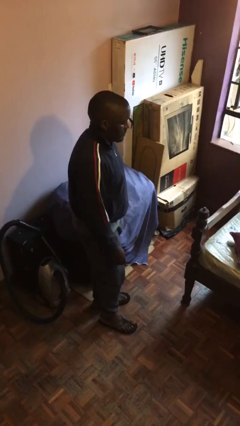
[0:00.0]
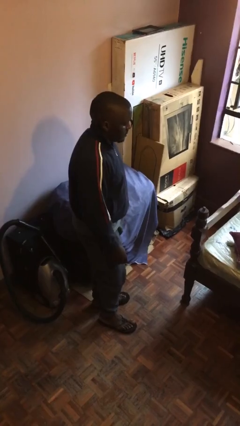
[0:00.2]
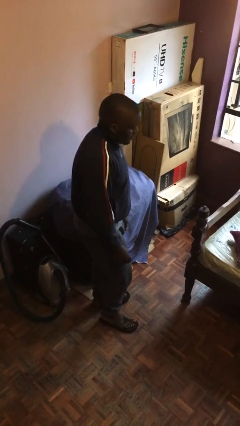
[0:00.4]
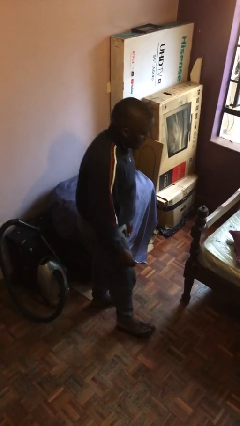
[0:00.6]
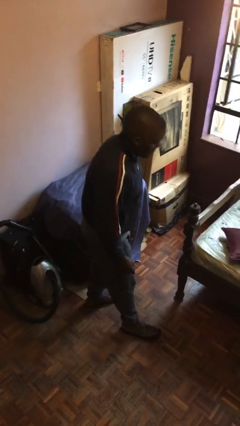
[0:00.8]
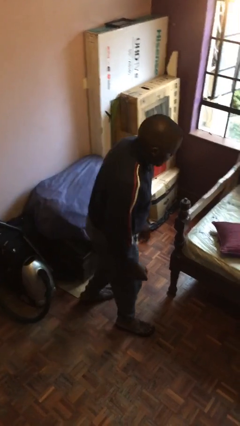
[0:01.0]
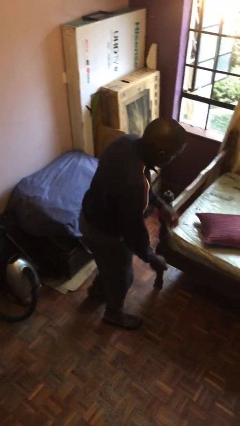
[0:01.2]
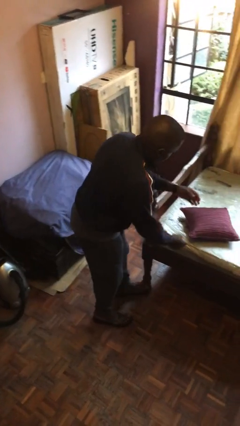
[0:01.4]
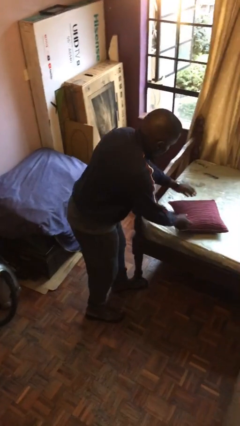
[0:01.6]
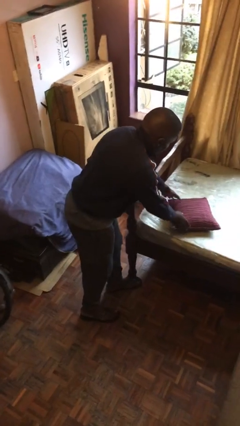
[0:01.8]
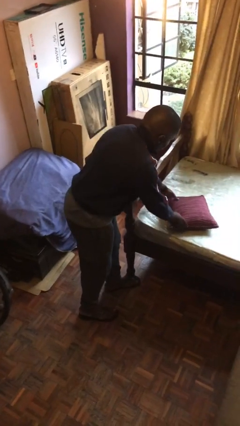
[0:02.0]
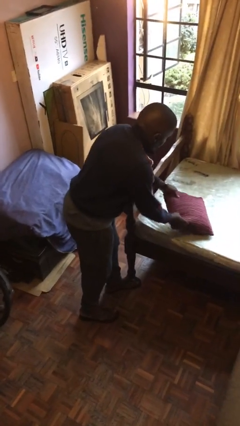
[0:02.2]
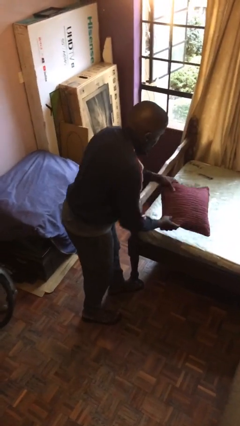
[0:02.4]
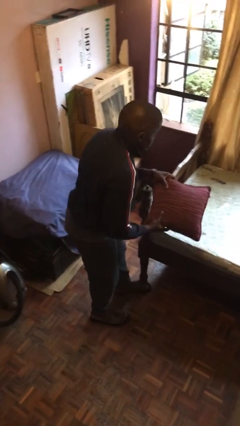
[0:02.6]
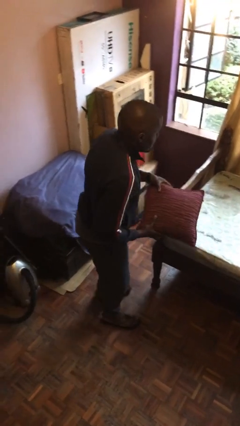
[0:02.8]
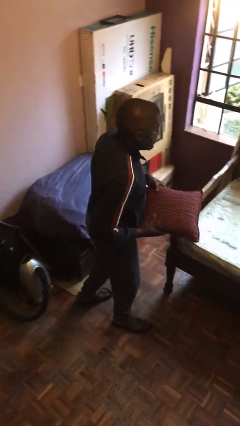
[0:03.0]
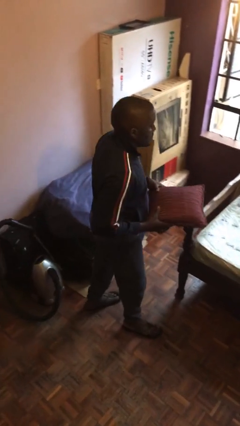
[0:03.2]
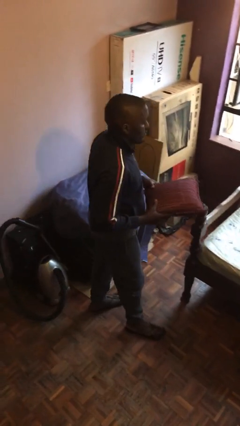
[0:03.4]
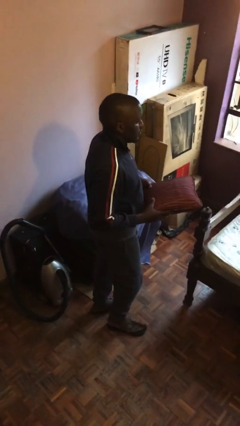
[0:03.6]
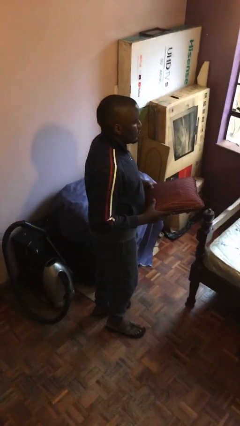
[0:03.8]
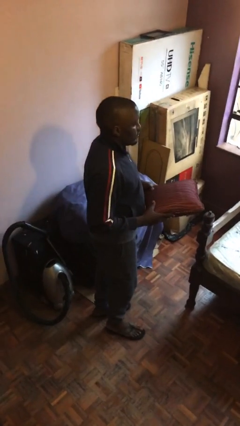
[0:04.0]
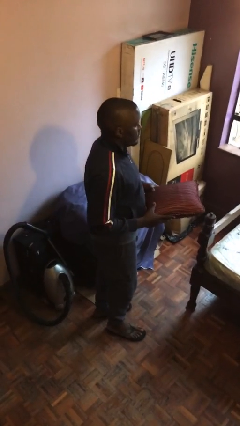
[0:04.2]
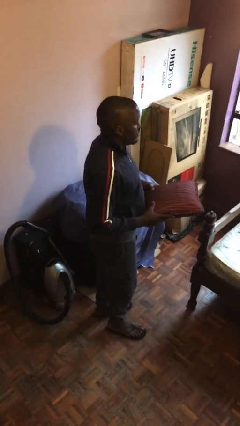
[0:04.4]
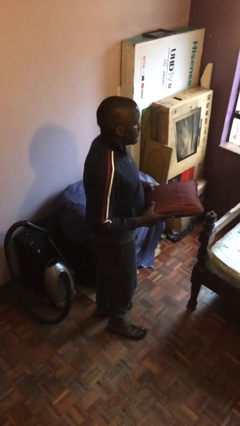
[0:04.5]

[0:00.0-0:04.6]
person picks up object from bed

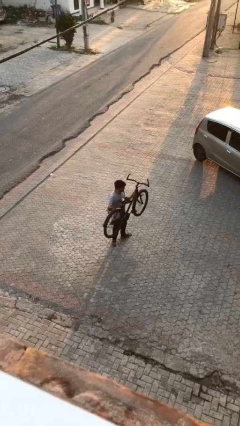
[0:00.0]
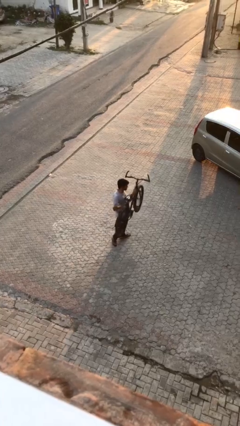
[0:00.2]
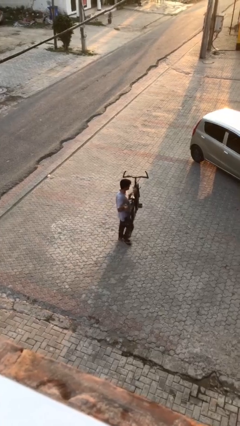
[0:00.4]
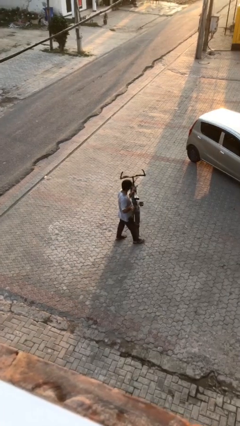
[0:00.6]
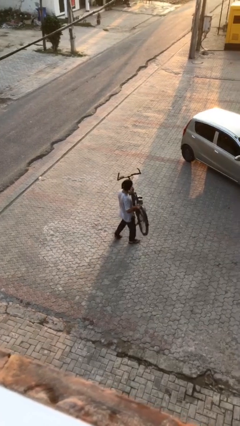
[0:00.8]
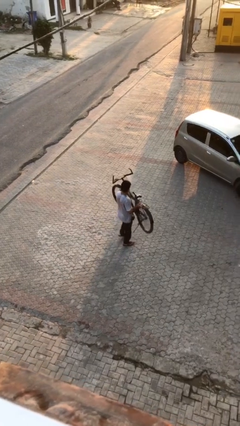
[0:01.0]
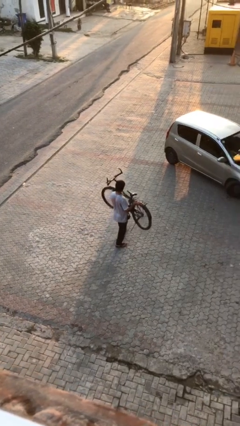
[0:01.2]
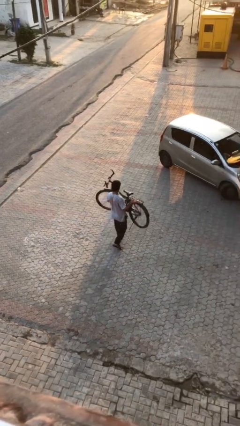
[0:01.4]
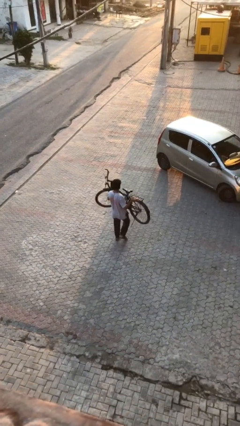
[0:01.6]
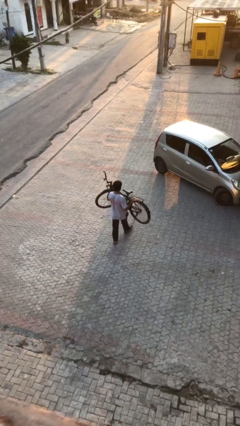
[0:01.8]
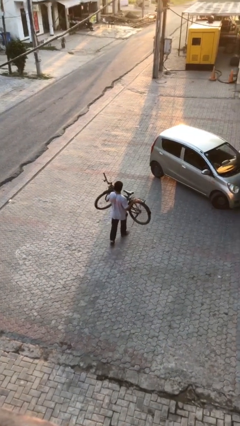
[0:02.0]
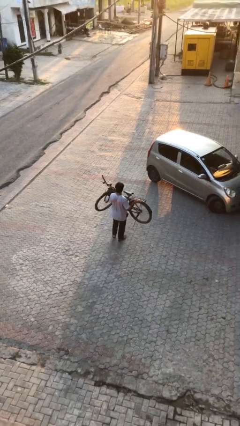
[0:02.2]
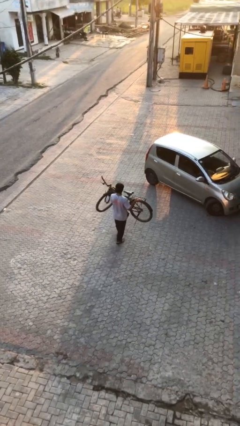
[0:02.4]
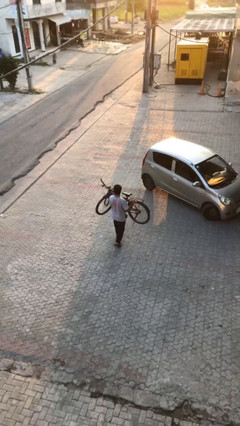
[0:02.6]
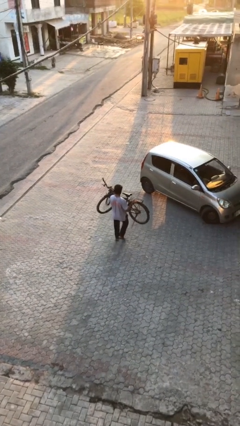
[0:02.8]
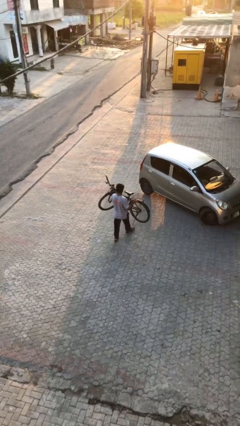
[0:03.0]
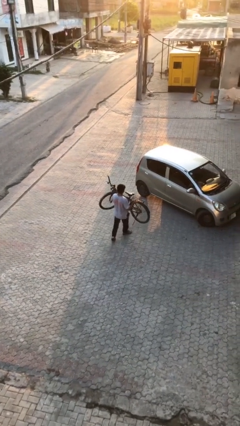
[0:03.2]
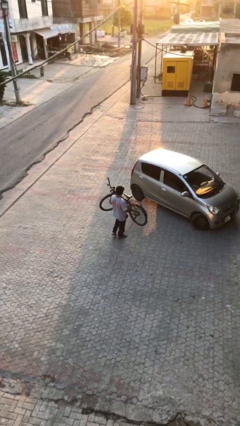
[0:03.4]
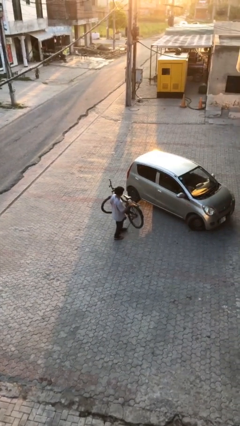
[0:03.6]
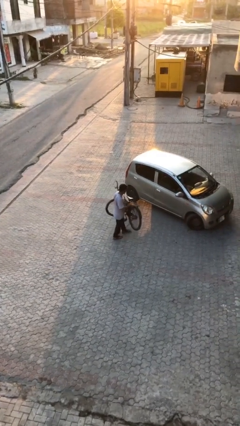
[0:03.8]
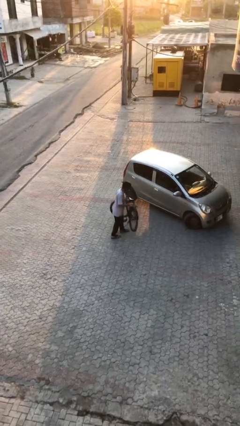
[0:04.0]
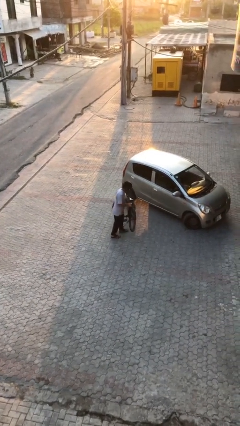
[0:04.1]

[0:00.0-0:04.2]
person carries heavy object

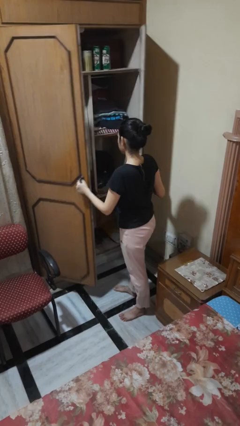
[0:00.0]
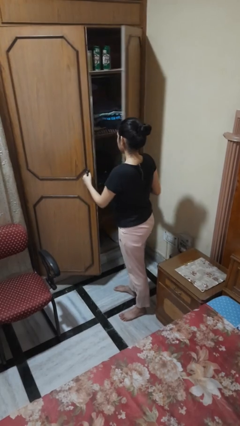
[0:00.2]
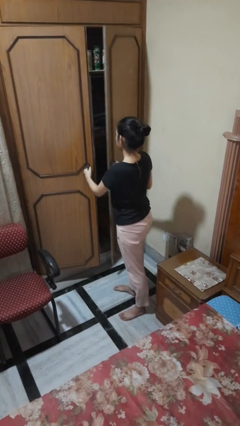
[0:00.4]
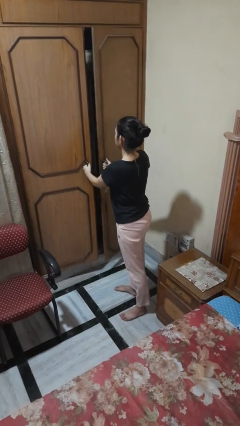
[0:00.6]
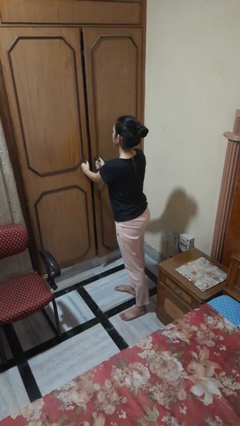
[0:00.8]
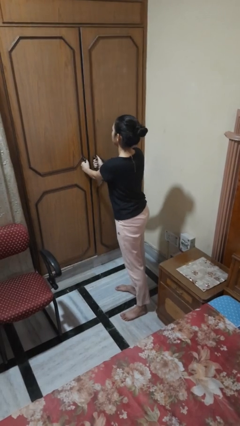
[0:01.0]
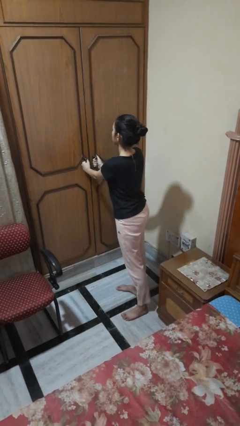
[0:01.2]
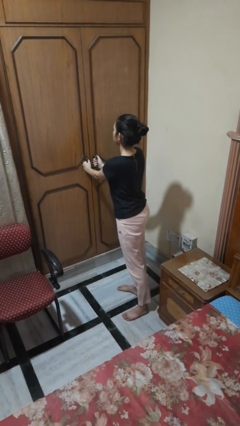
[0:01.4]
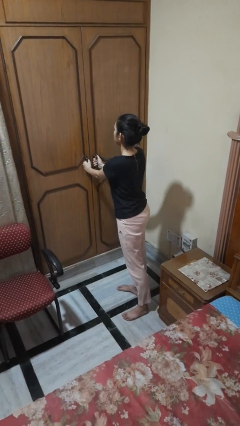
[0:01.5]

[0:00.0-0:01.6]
person closes closet door

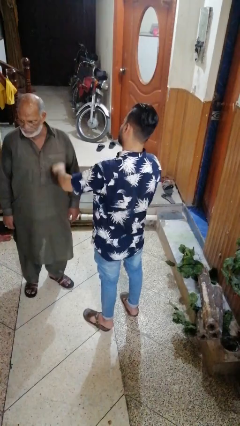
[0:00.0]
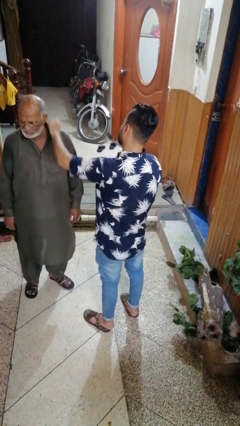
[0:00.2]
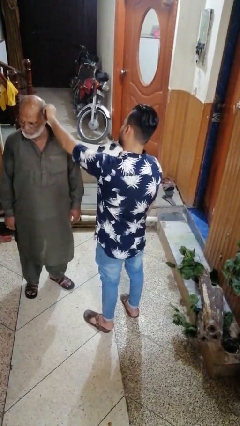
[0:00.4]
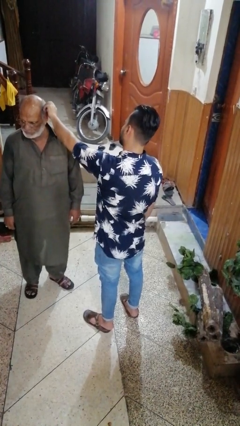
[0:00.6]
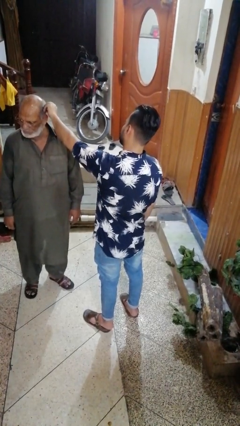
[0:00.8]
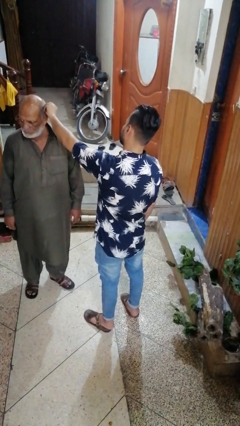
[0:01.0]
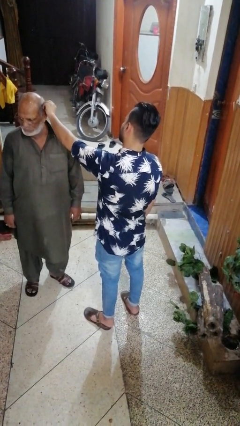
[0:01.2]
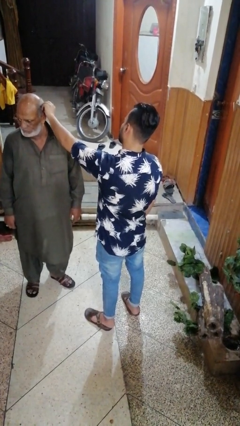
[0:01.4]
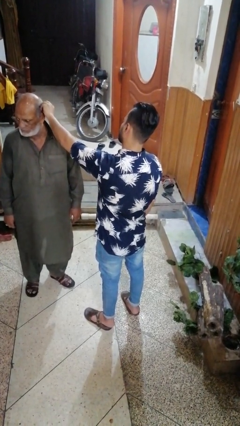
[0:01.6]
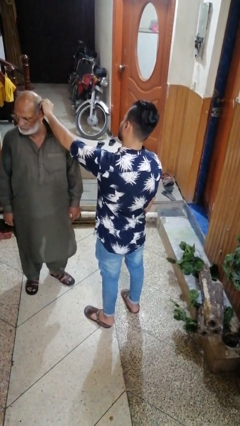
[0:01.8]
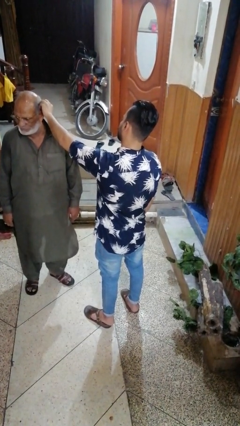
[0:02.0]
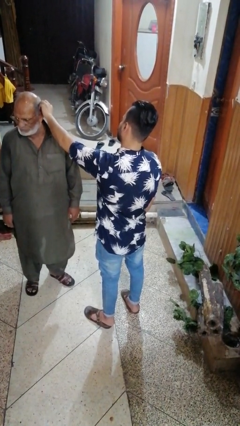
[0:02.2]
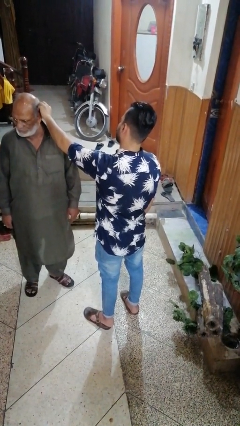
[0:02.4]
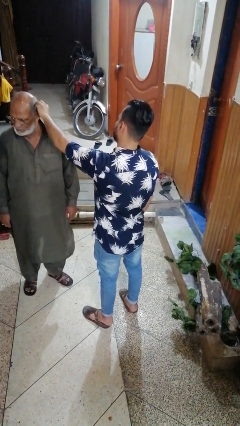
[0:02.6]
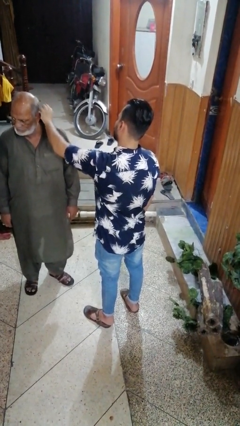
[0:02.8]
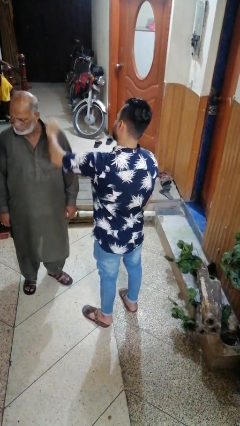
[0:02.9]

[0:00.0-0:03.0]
person grabs person by hair

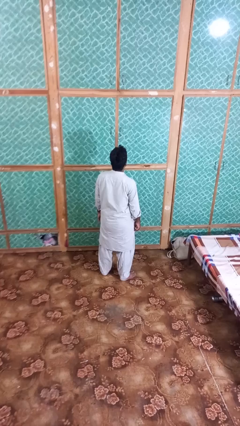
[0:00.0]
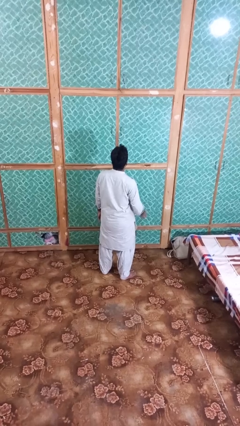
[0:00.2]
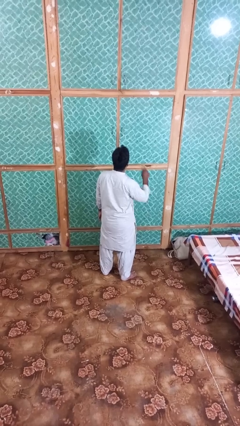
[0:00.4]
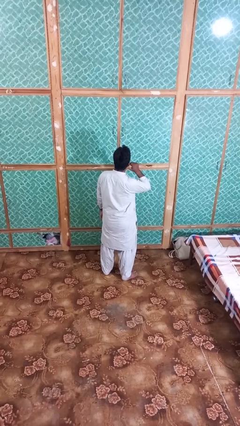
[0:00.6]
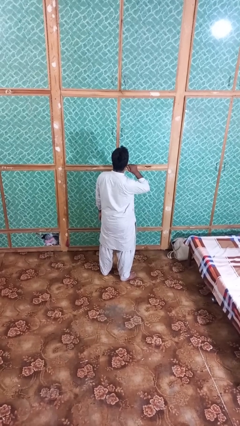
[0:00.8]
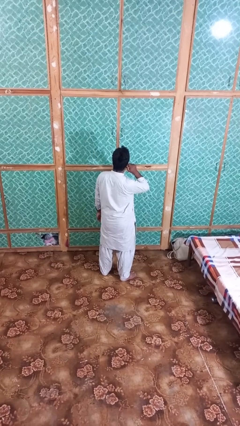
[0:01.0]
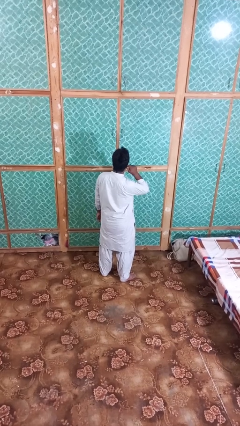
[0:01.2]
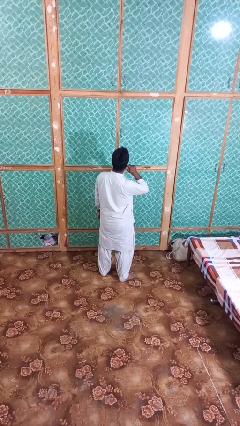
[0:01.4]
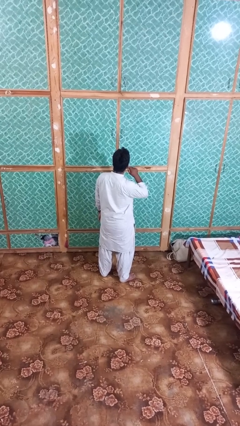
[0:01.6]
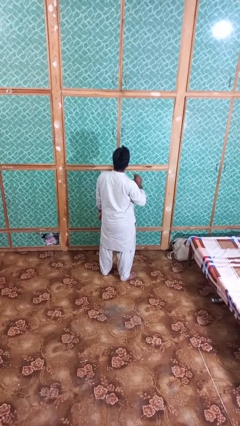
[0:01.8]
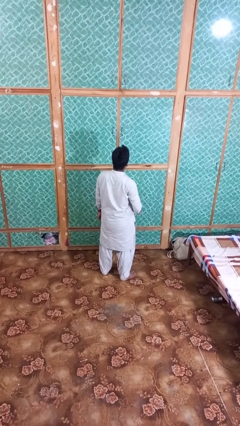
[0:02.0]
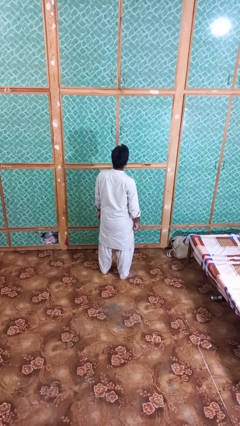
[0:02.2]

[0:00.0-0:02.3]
person touches earlobe

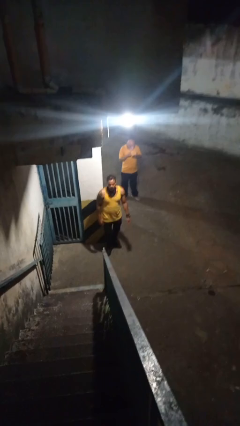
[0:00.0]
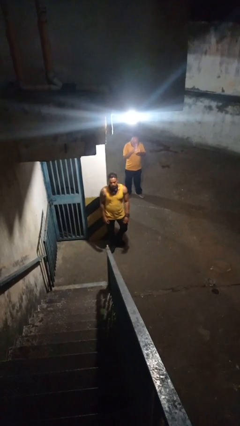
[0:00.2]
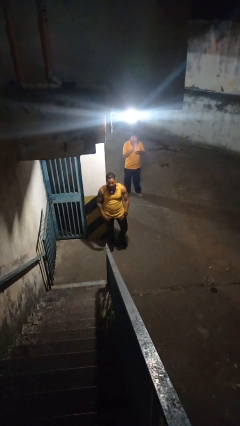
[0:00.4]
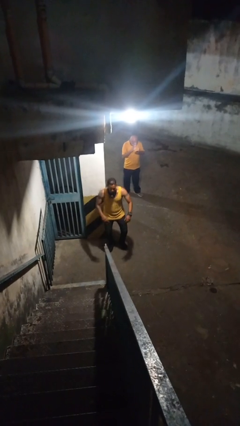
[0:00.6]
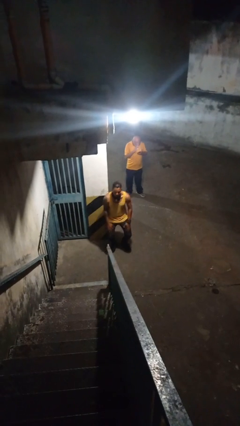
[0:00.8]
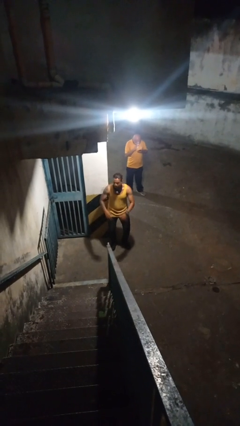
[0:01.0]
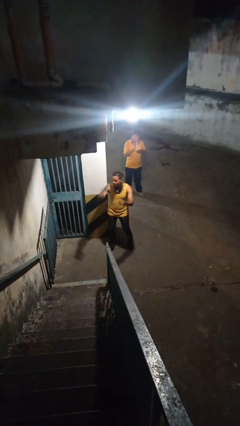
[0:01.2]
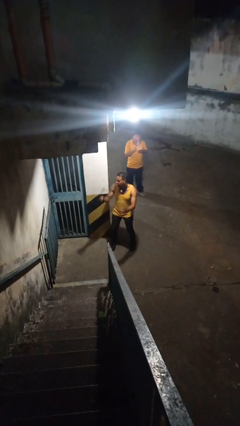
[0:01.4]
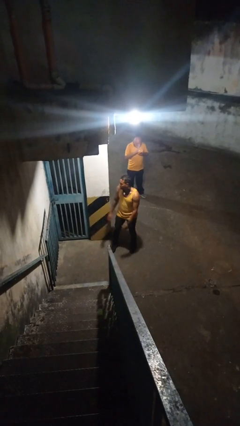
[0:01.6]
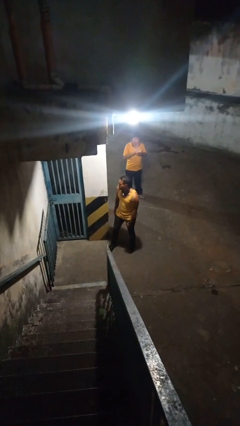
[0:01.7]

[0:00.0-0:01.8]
person slaps hands on thighs
